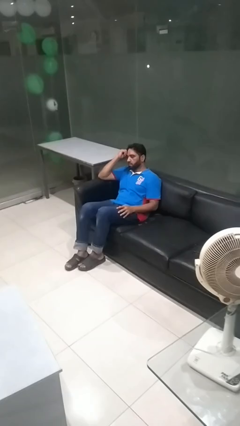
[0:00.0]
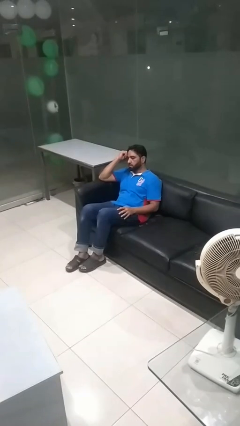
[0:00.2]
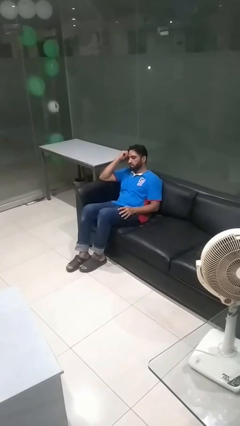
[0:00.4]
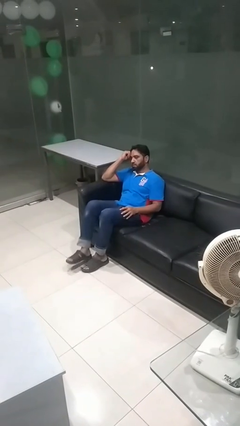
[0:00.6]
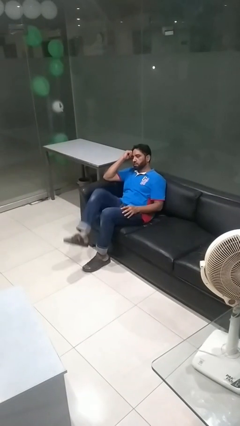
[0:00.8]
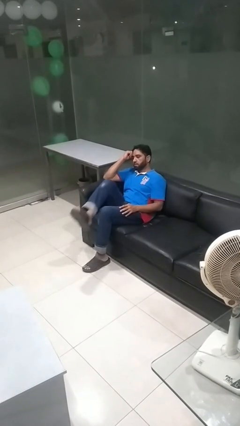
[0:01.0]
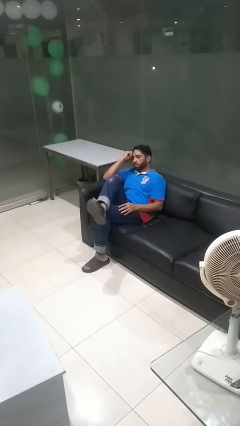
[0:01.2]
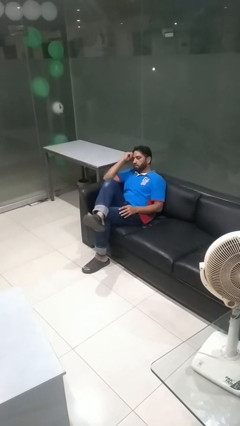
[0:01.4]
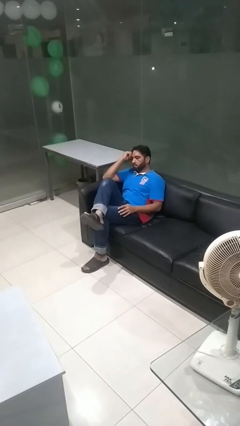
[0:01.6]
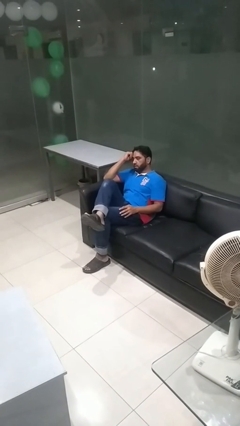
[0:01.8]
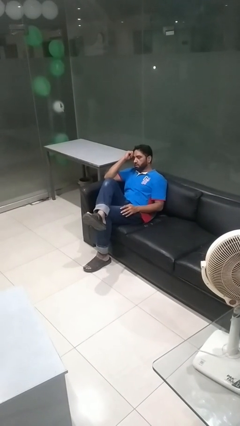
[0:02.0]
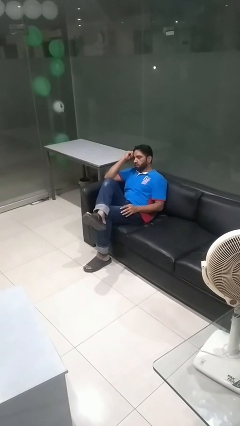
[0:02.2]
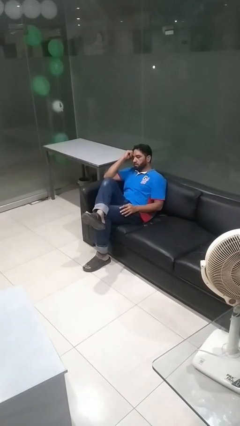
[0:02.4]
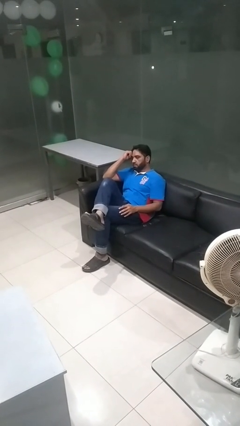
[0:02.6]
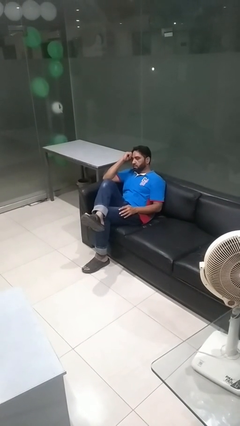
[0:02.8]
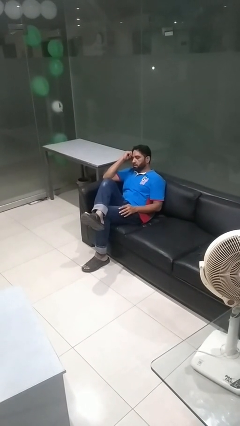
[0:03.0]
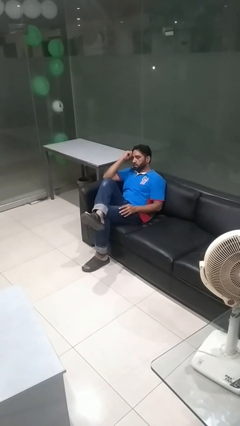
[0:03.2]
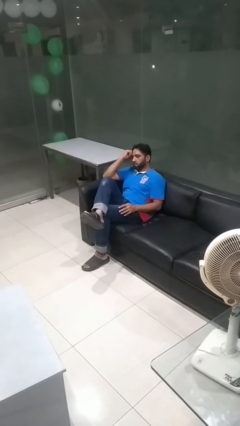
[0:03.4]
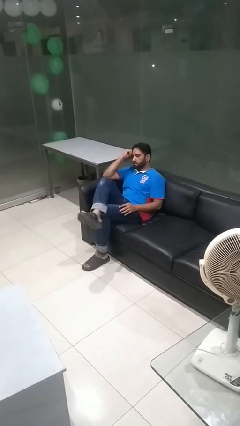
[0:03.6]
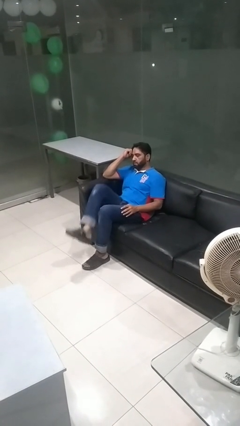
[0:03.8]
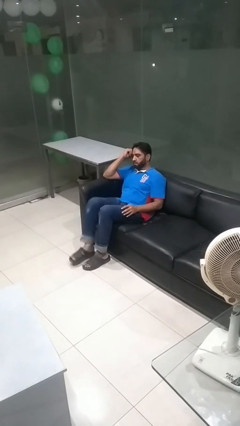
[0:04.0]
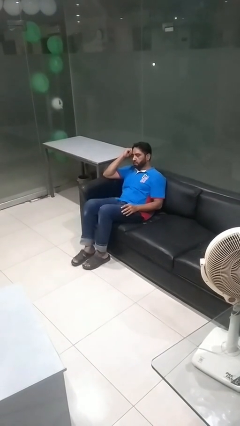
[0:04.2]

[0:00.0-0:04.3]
person crosses legs

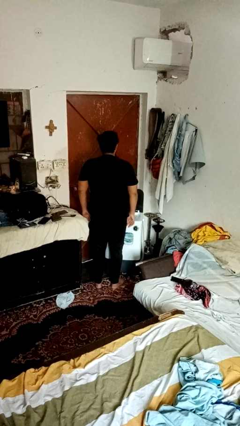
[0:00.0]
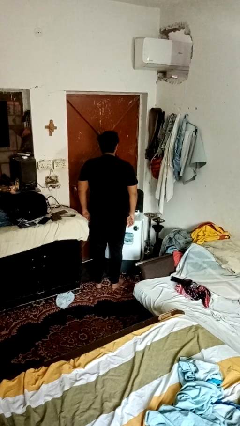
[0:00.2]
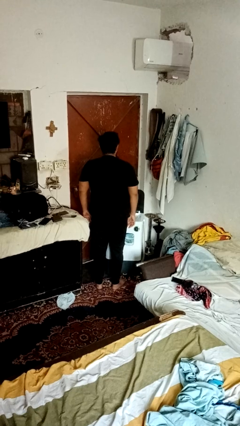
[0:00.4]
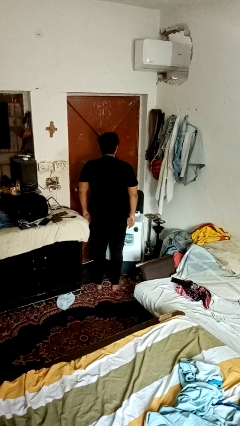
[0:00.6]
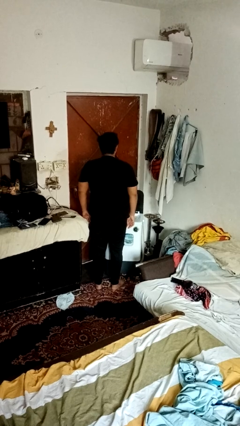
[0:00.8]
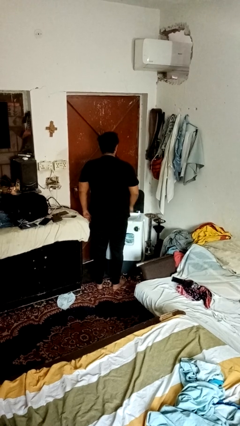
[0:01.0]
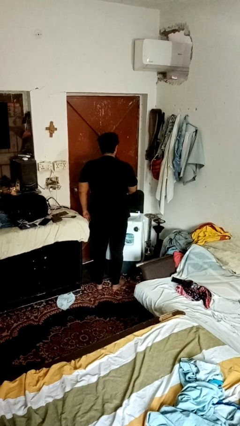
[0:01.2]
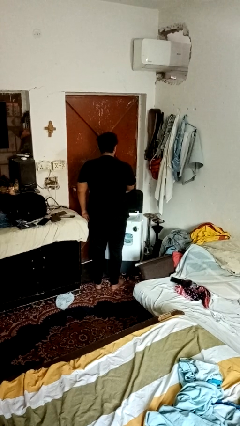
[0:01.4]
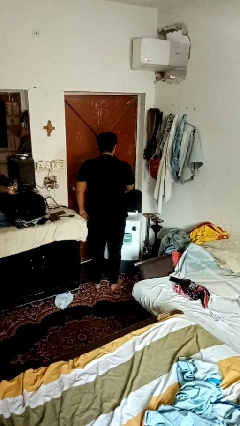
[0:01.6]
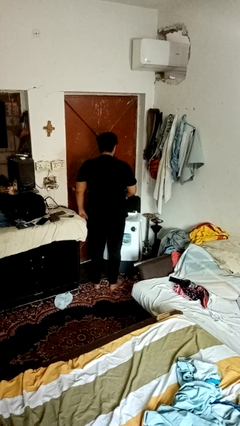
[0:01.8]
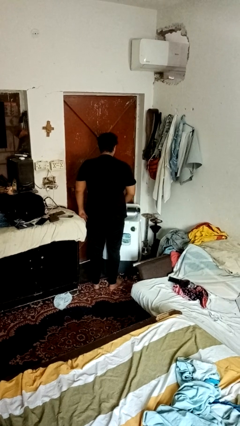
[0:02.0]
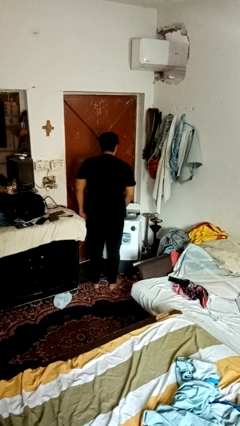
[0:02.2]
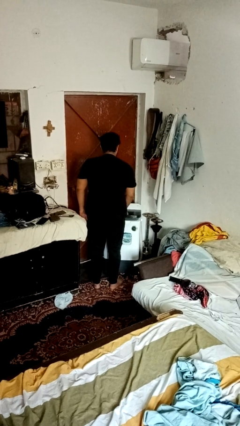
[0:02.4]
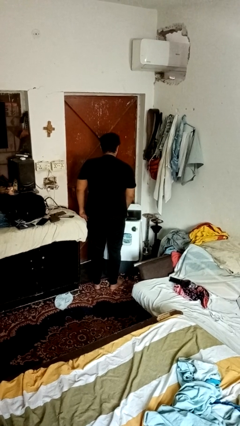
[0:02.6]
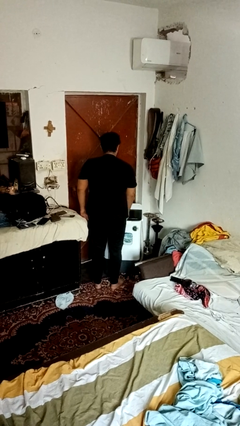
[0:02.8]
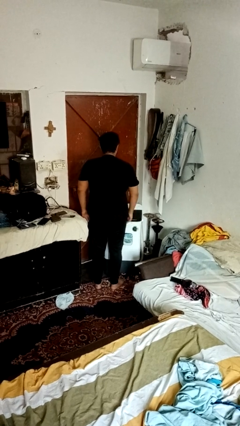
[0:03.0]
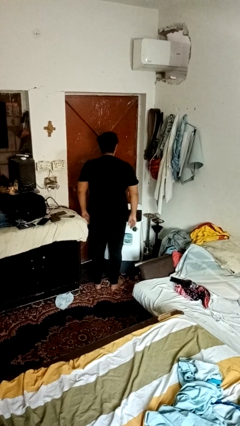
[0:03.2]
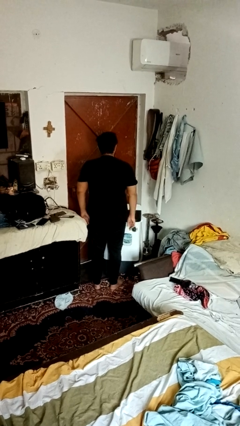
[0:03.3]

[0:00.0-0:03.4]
person closes clothes washer

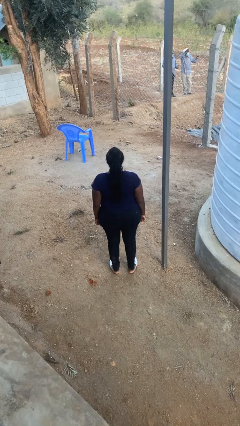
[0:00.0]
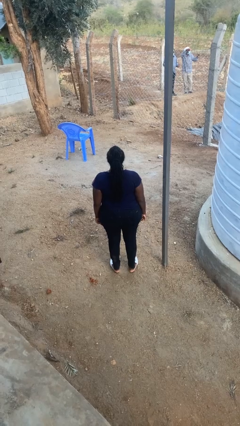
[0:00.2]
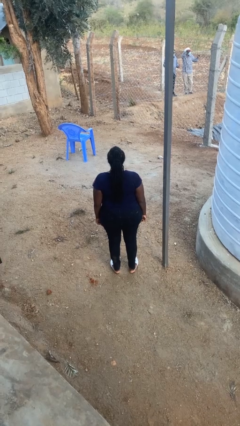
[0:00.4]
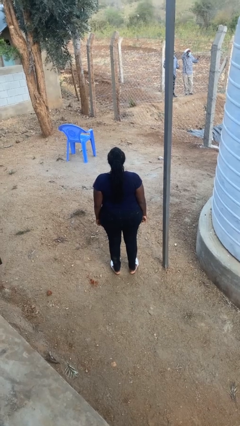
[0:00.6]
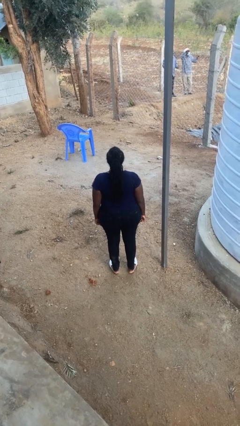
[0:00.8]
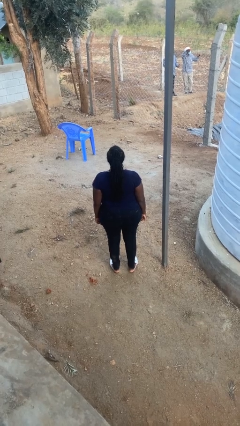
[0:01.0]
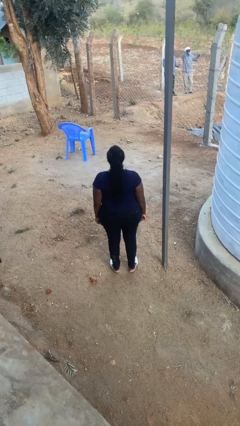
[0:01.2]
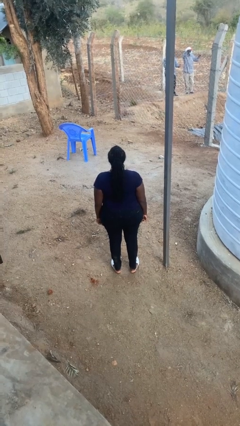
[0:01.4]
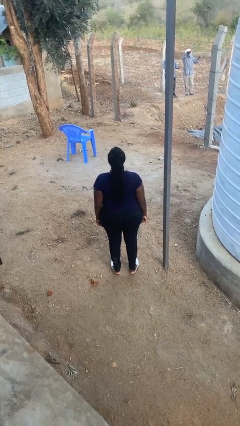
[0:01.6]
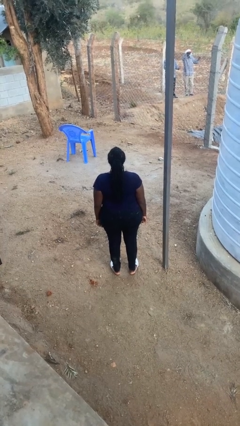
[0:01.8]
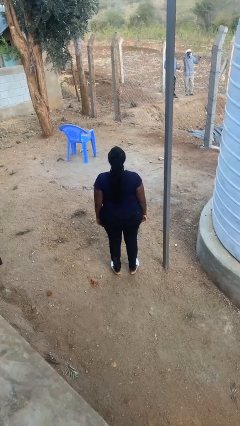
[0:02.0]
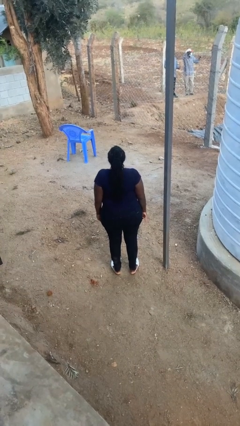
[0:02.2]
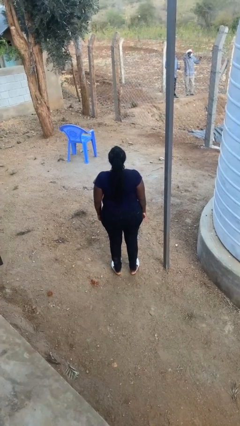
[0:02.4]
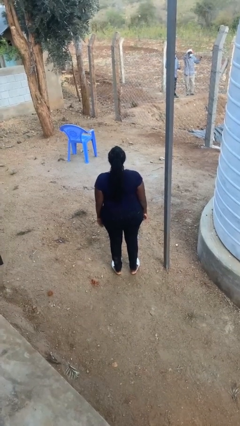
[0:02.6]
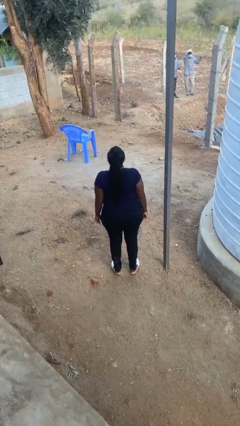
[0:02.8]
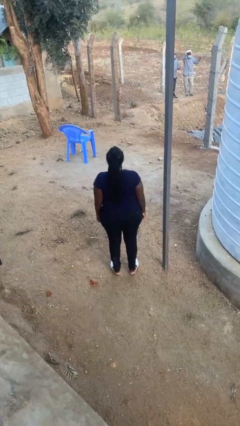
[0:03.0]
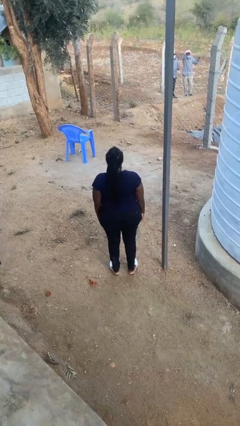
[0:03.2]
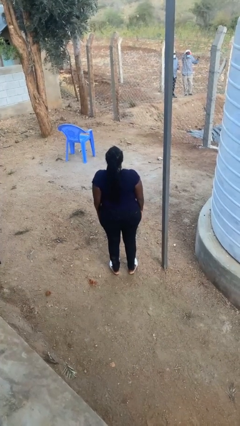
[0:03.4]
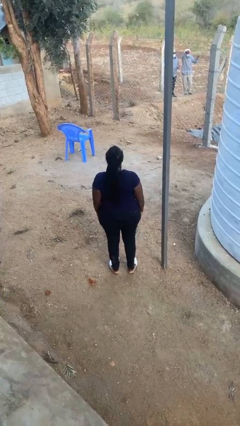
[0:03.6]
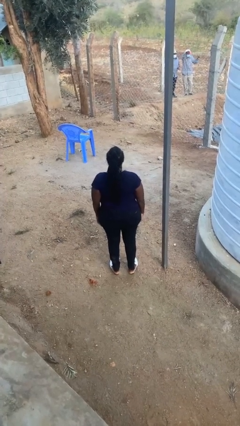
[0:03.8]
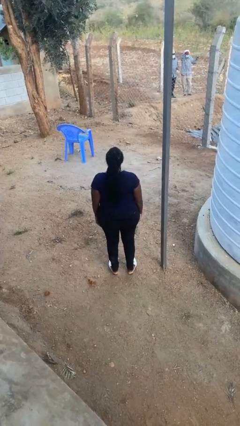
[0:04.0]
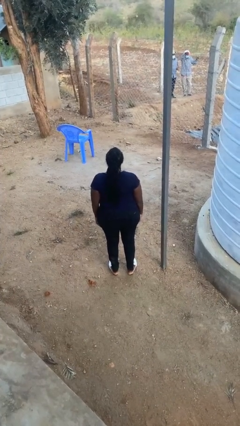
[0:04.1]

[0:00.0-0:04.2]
person shrugs

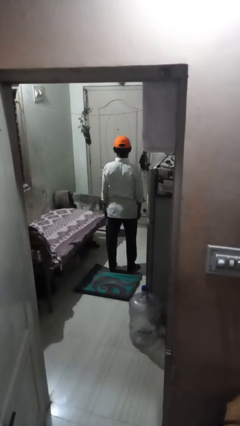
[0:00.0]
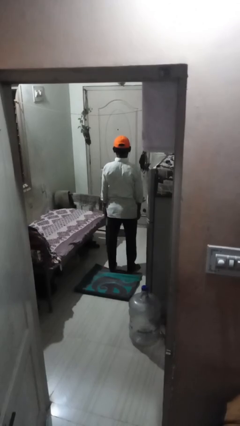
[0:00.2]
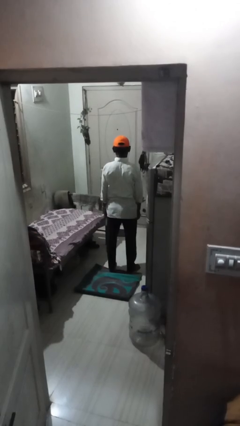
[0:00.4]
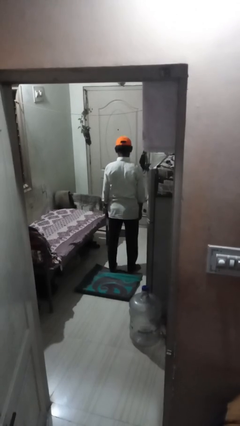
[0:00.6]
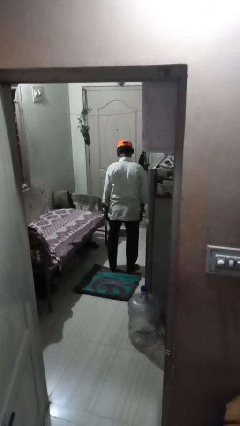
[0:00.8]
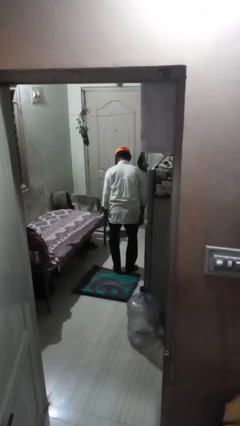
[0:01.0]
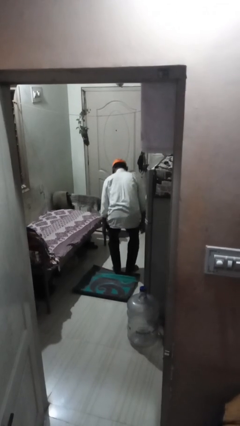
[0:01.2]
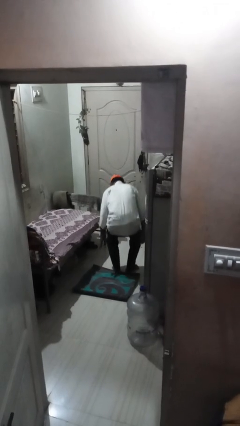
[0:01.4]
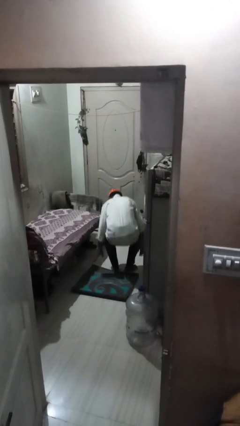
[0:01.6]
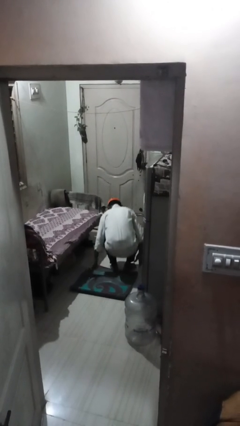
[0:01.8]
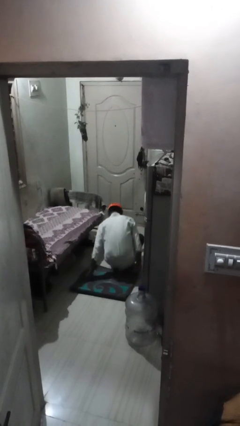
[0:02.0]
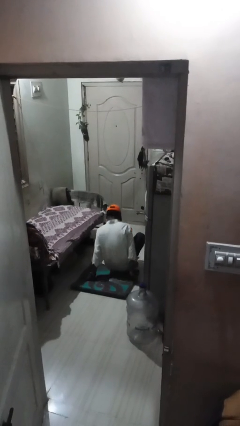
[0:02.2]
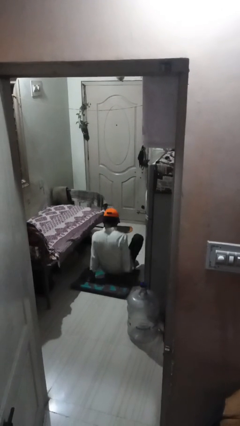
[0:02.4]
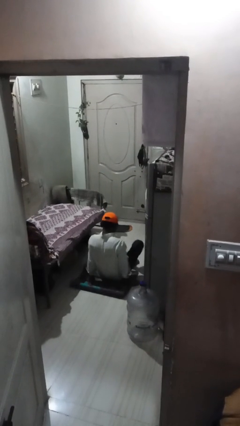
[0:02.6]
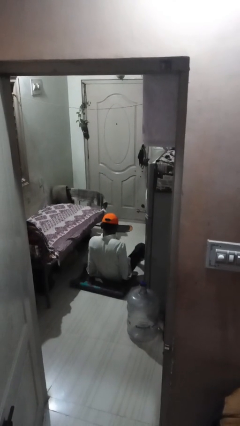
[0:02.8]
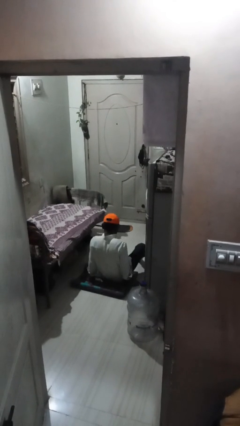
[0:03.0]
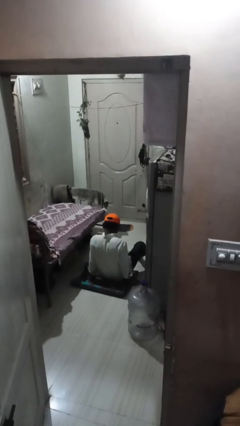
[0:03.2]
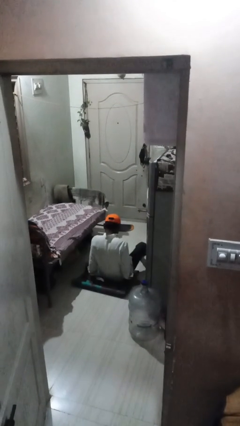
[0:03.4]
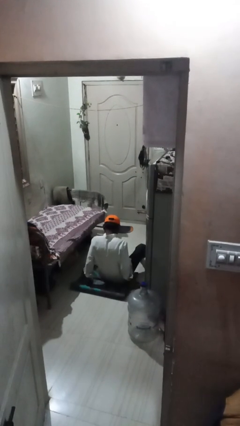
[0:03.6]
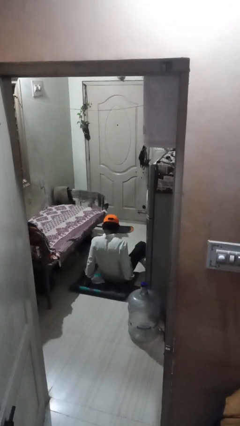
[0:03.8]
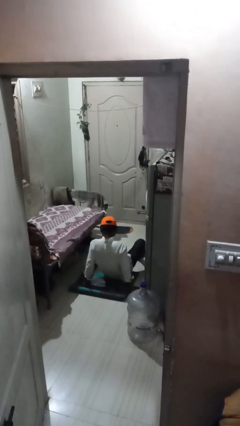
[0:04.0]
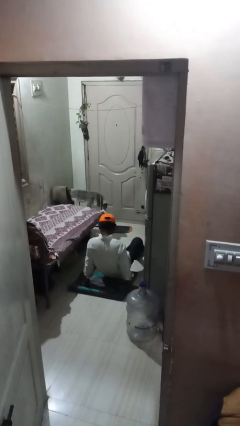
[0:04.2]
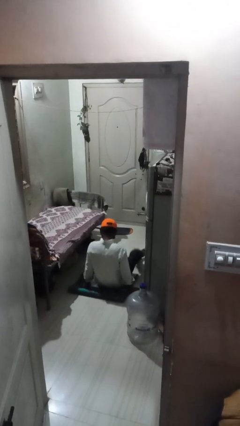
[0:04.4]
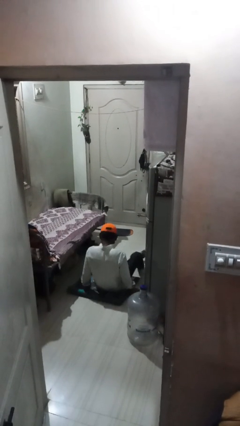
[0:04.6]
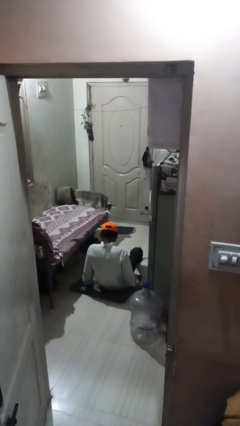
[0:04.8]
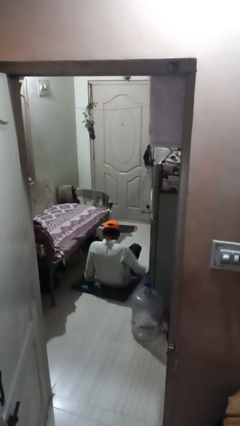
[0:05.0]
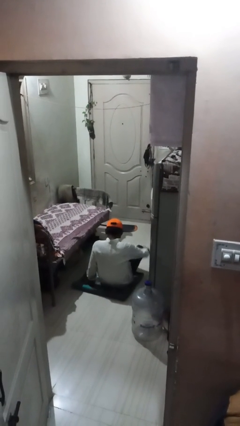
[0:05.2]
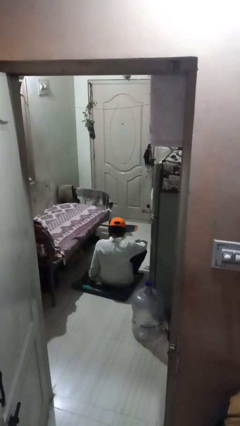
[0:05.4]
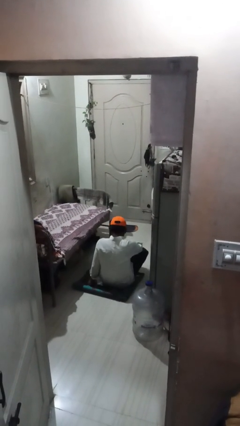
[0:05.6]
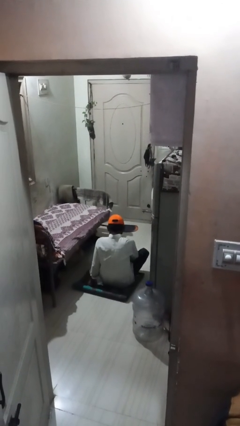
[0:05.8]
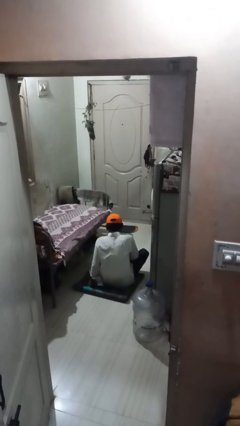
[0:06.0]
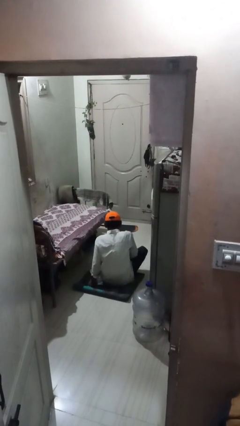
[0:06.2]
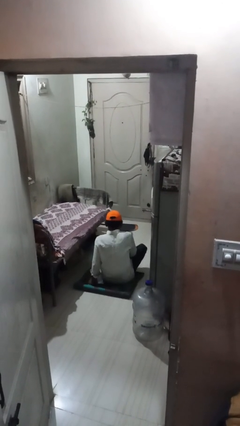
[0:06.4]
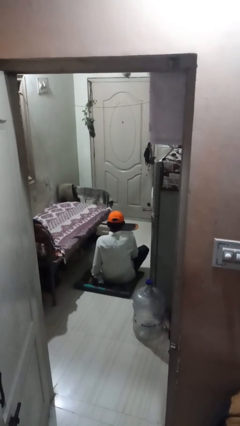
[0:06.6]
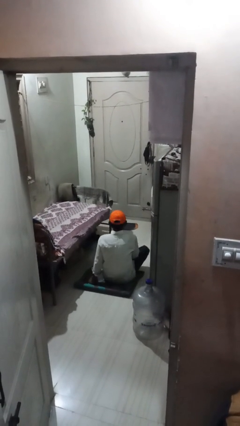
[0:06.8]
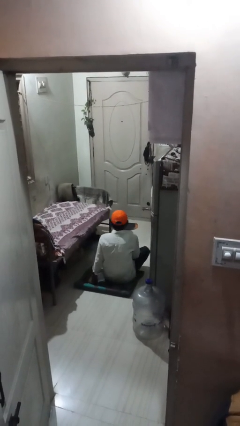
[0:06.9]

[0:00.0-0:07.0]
person sits crisscross
